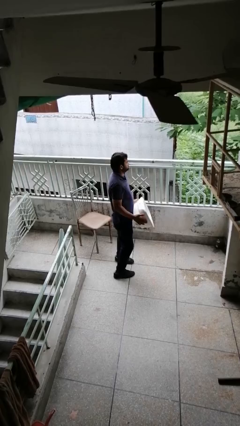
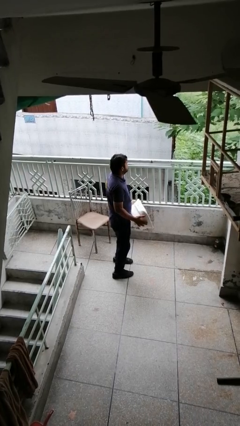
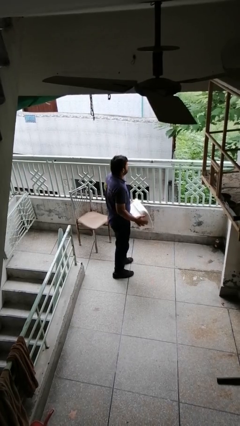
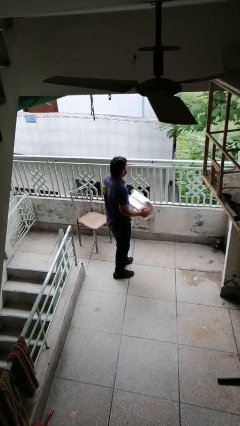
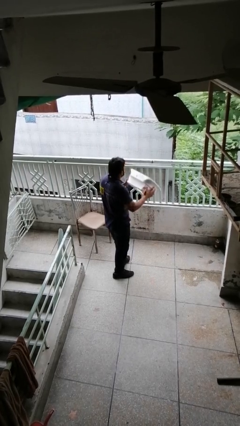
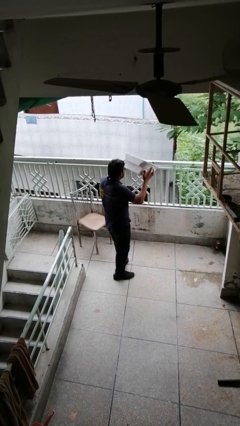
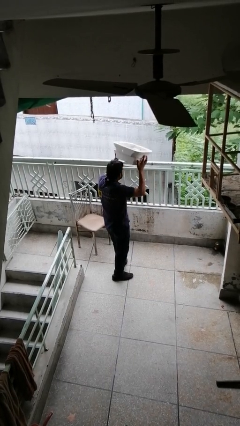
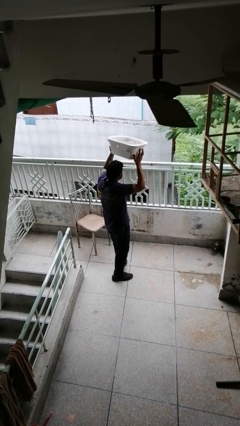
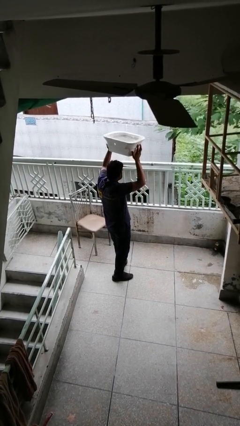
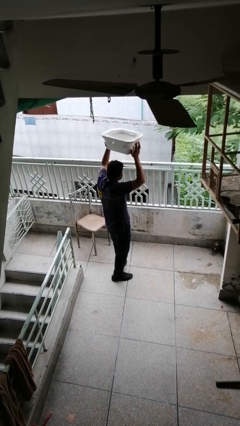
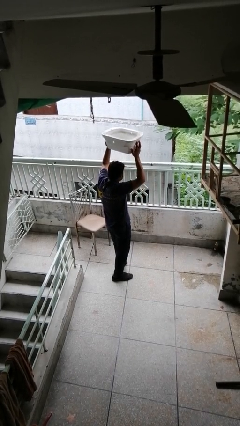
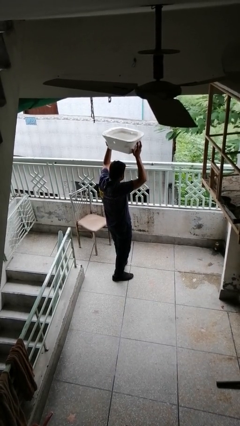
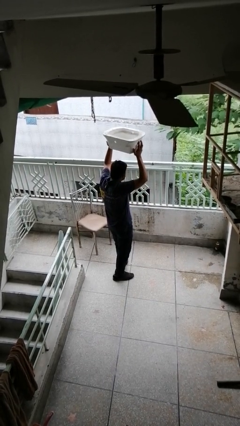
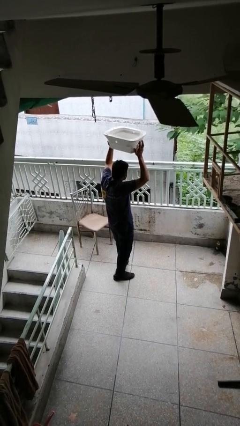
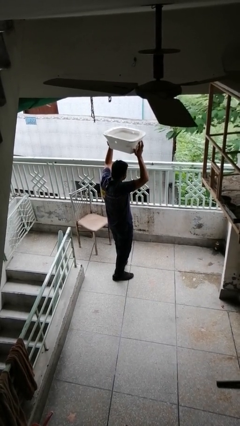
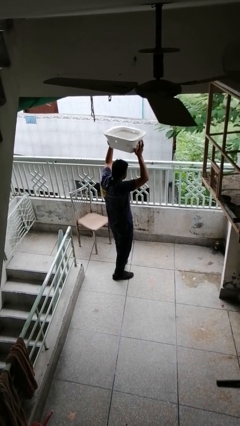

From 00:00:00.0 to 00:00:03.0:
person holds object above head

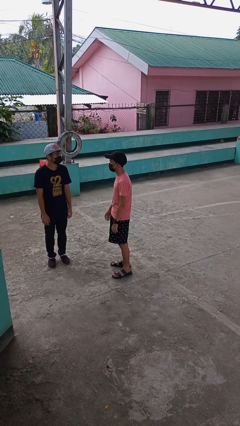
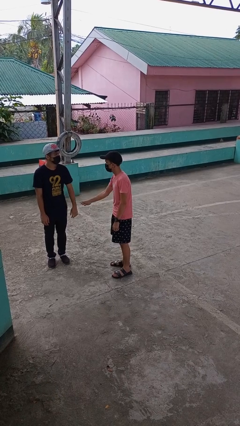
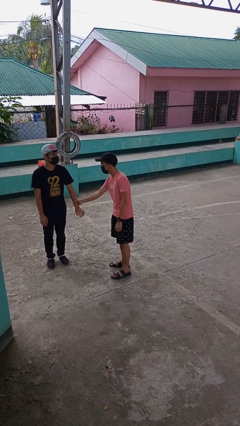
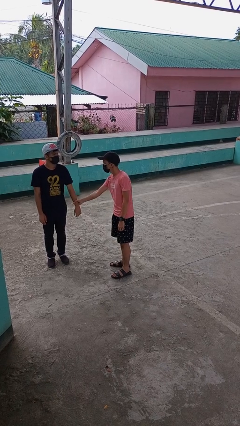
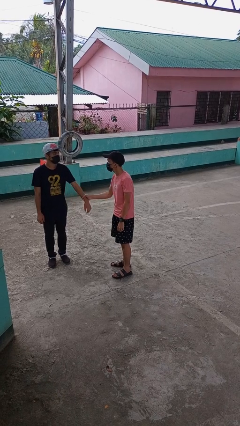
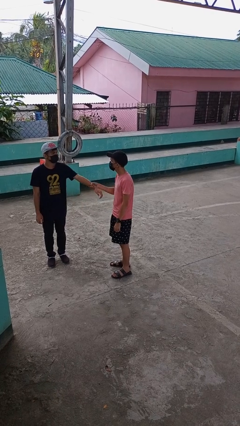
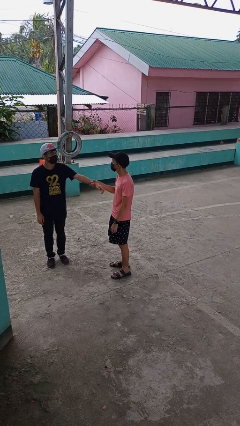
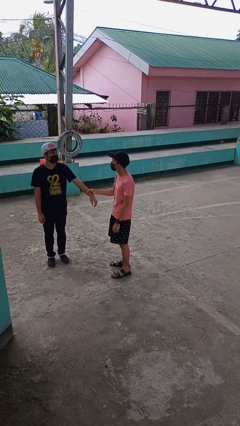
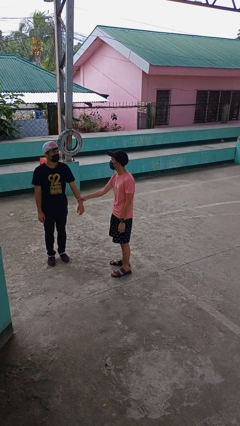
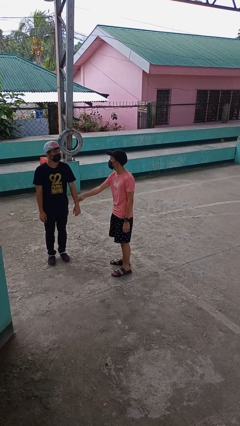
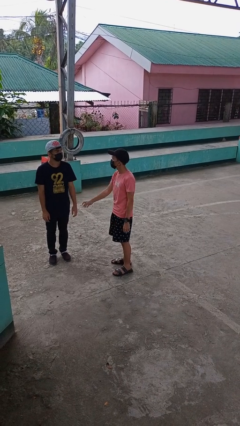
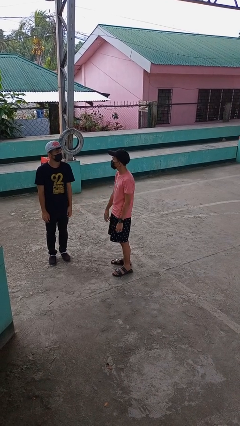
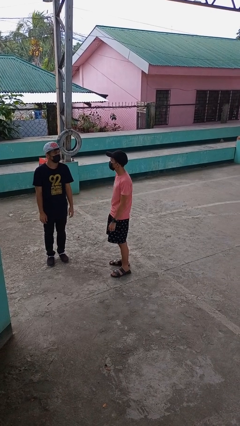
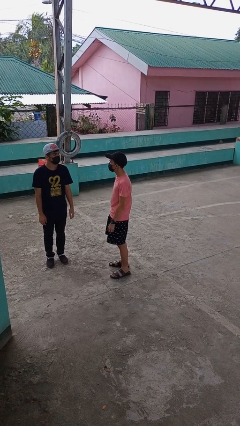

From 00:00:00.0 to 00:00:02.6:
person grabs person by forearm

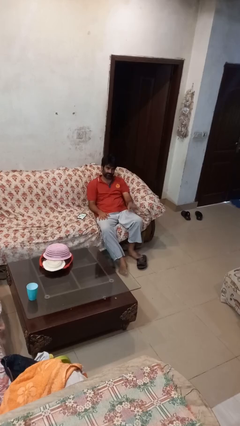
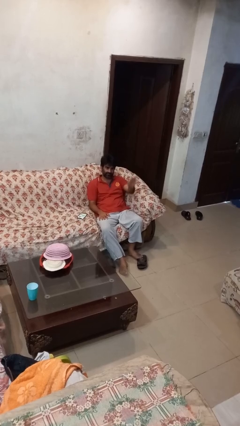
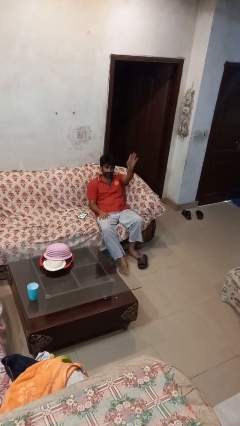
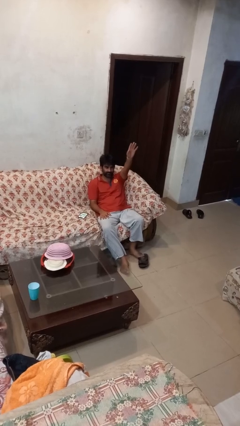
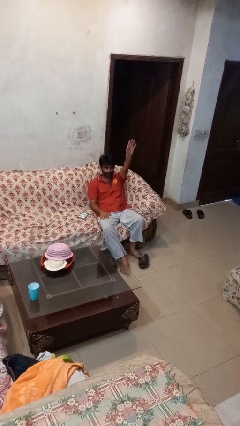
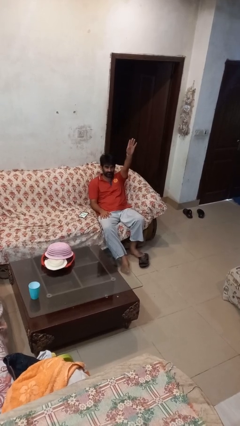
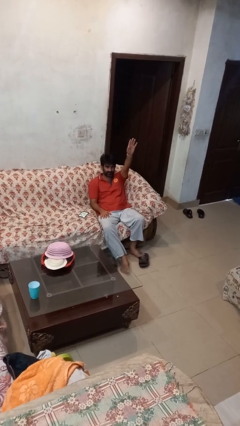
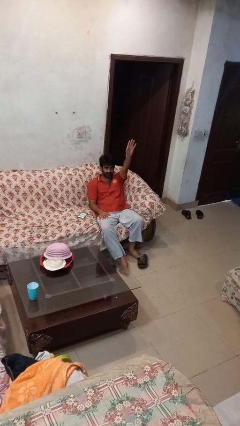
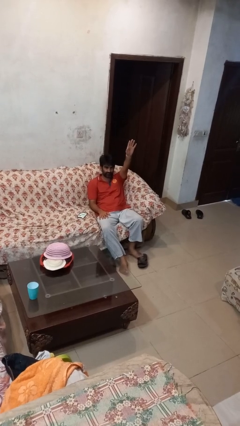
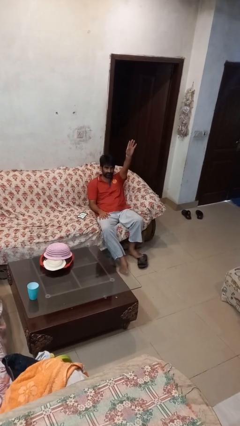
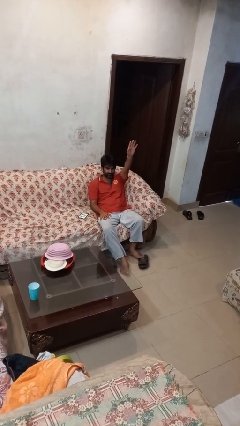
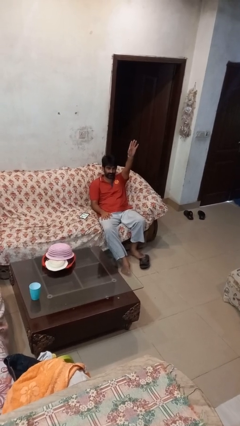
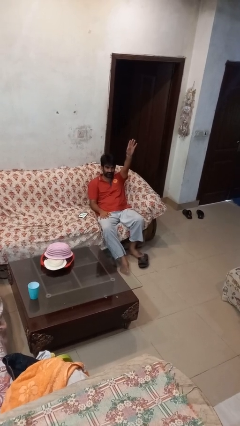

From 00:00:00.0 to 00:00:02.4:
person gestures raise hand

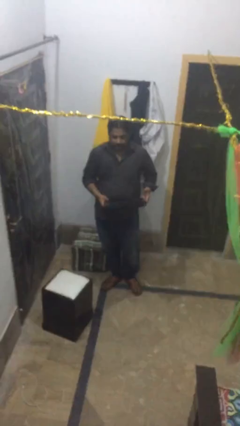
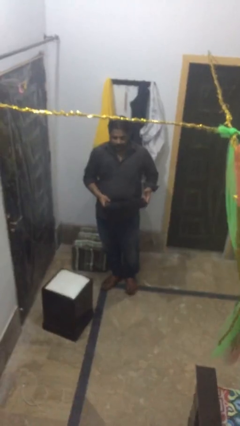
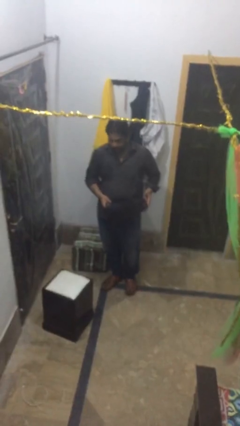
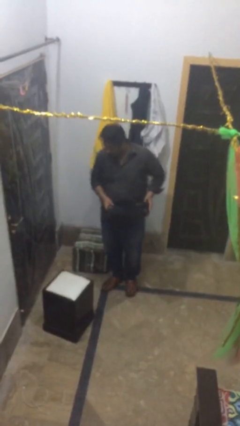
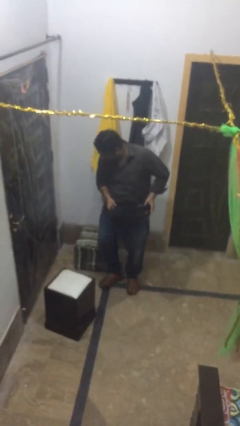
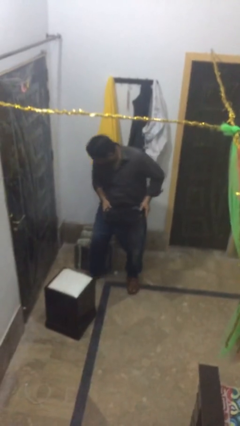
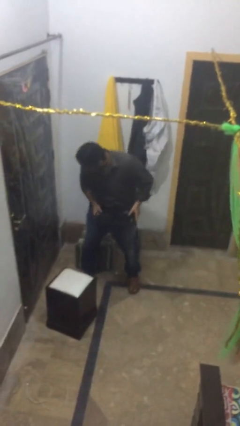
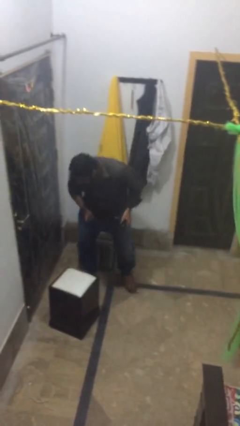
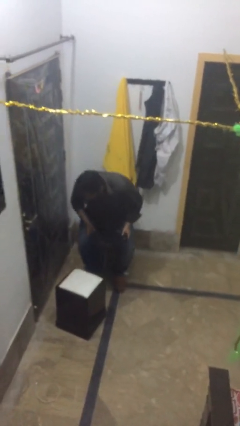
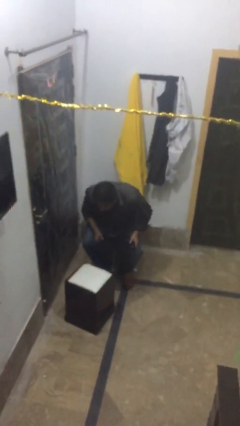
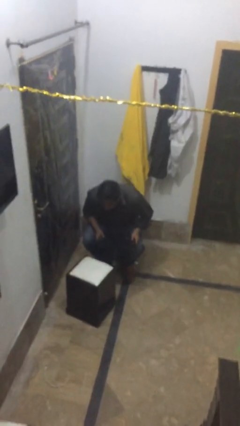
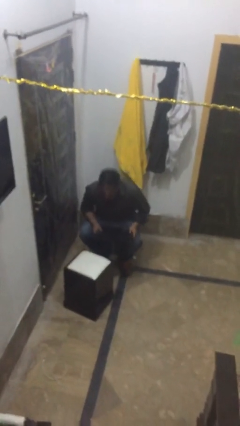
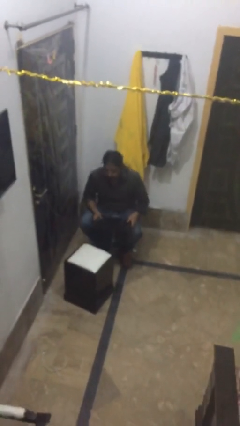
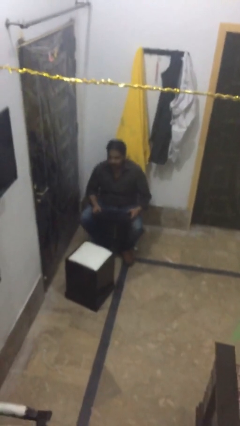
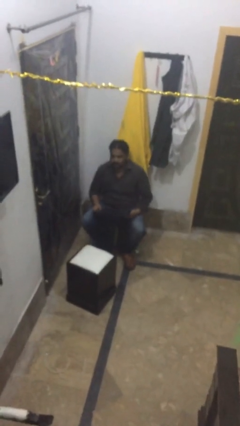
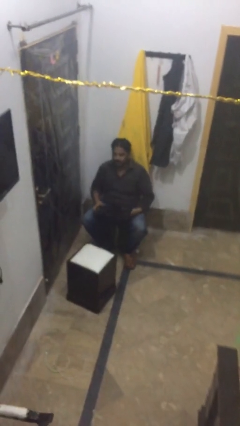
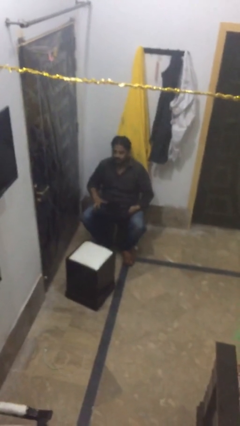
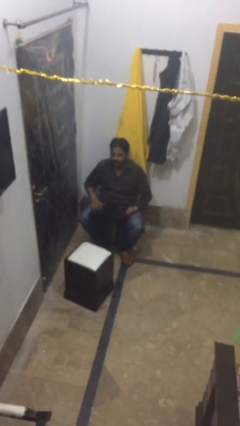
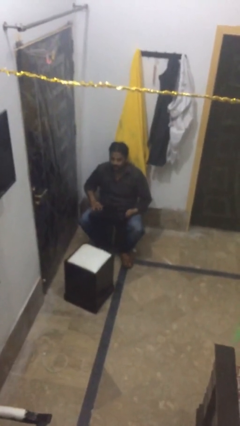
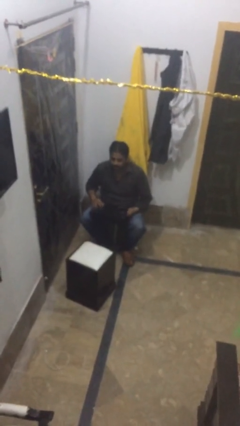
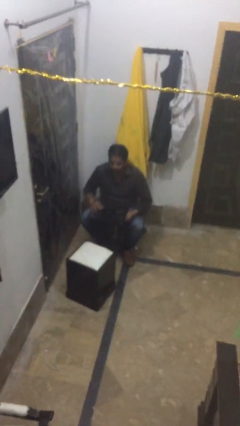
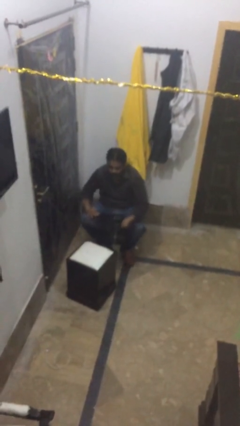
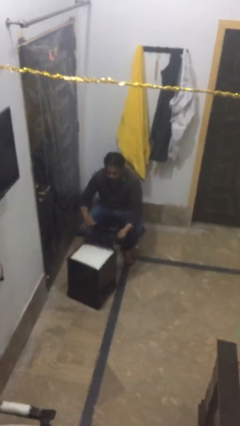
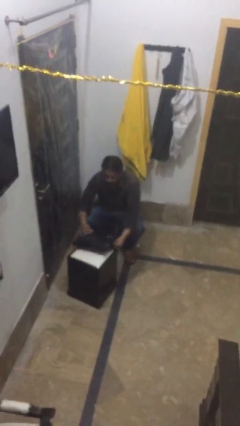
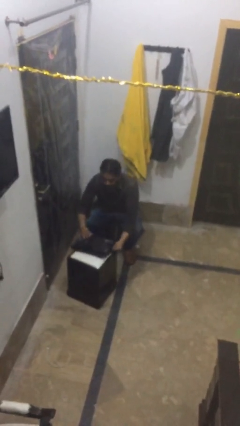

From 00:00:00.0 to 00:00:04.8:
person sits down

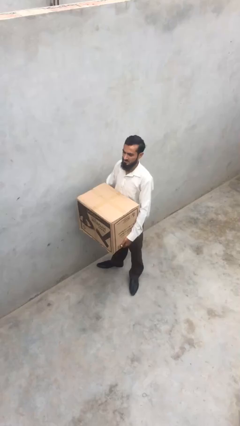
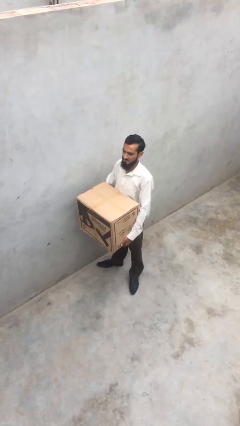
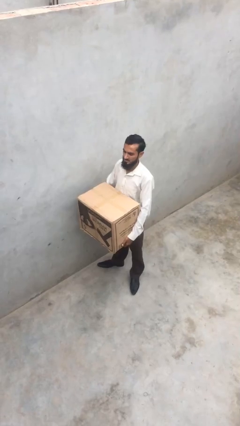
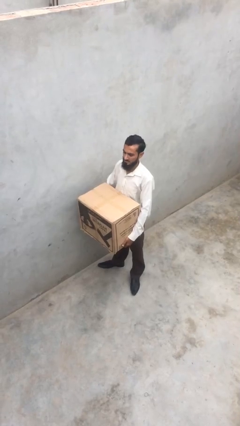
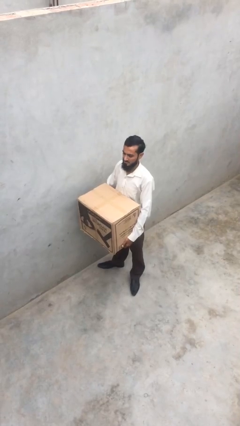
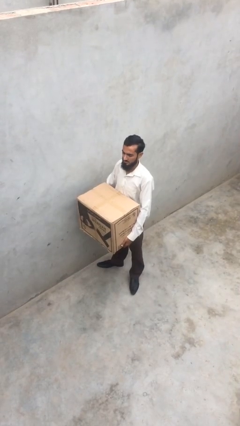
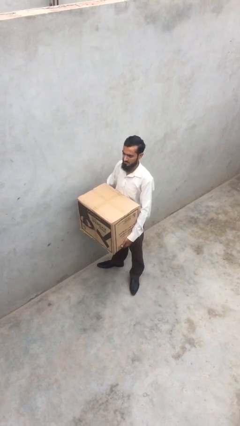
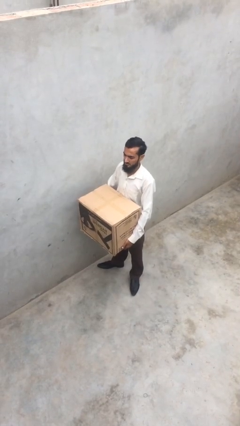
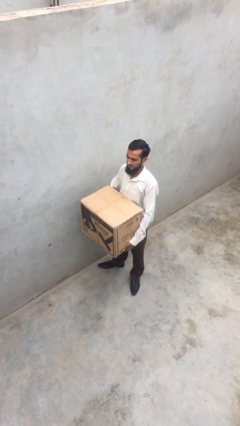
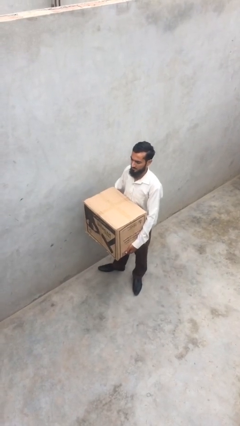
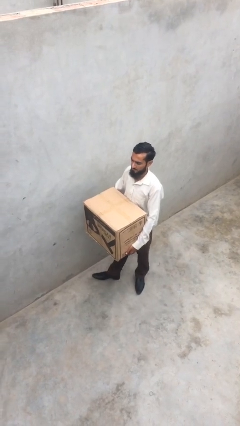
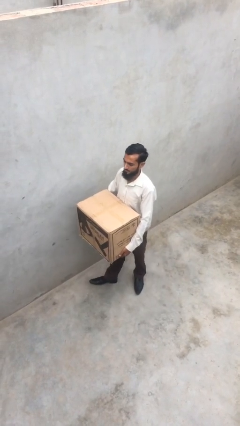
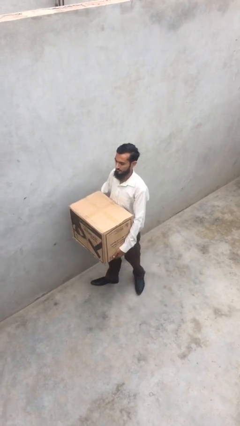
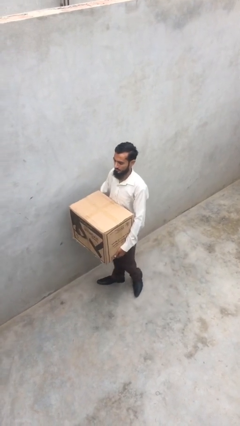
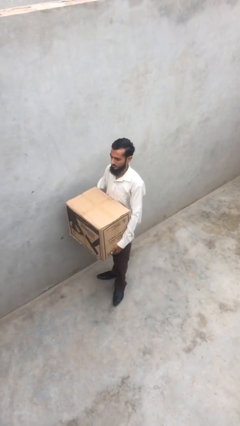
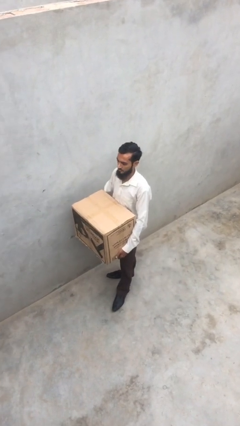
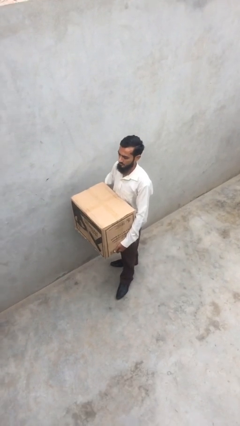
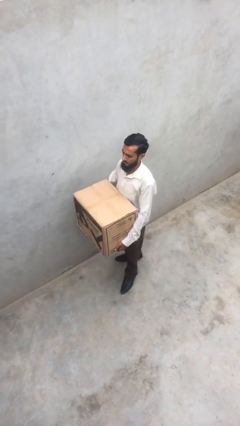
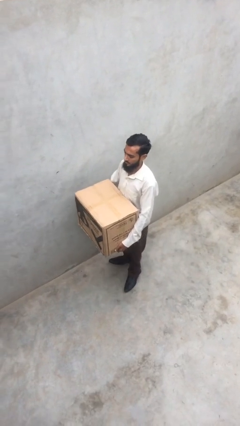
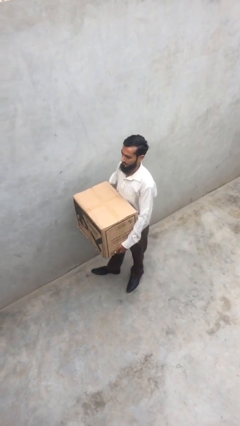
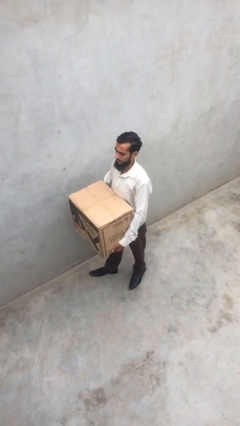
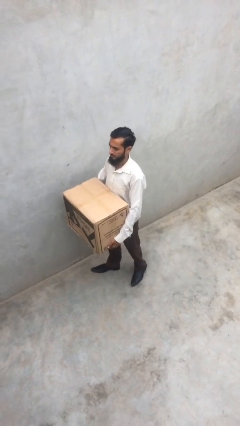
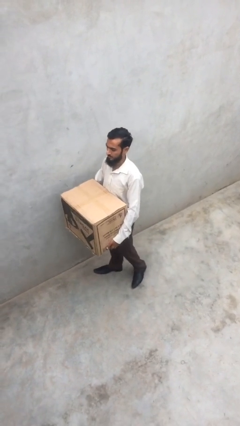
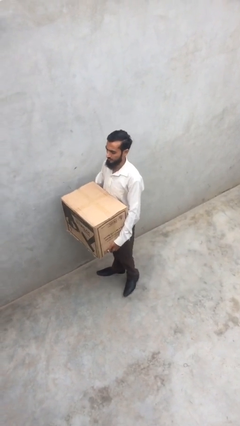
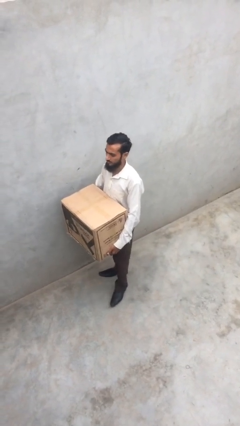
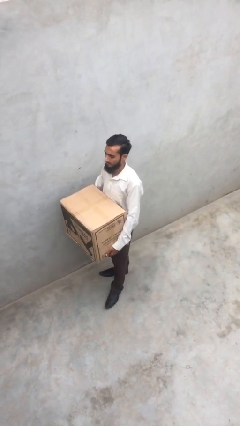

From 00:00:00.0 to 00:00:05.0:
person carries heavy object

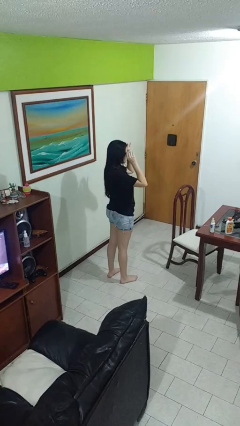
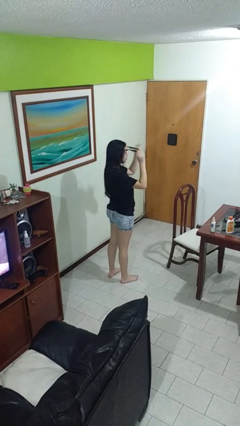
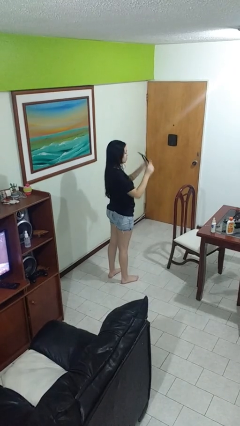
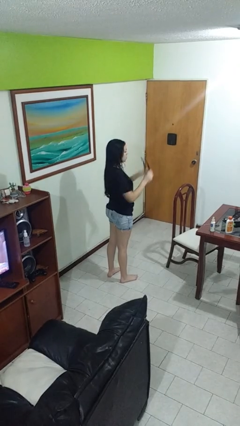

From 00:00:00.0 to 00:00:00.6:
person takes off sunglasses
